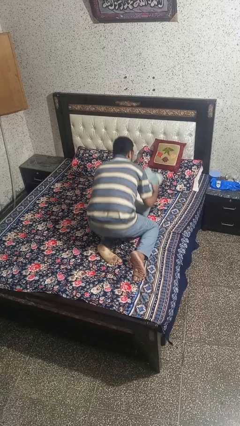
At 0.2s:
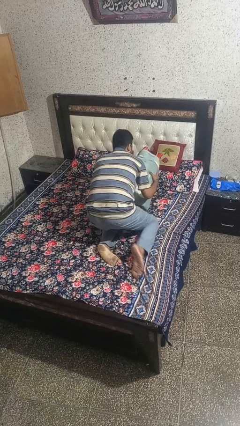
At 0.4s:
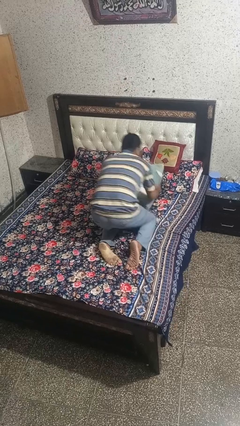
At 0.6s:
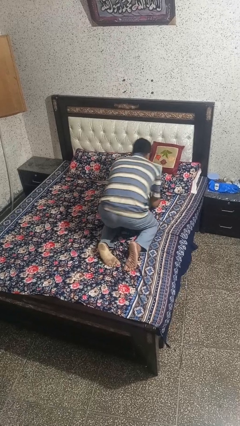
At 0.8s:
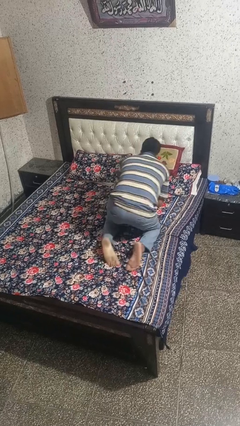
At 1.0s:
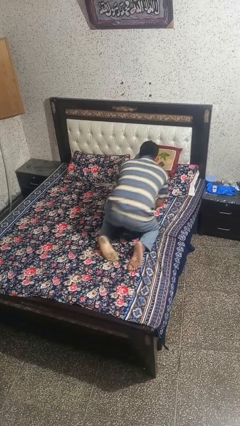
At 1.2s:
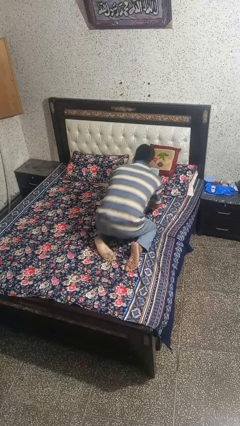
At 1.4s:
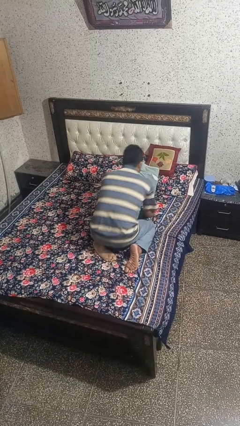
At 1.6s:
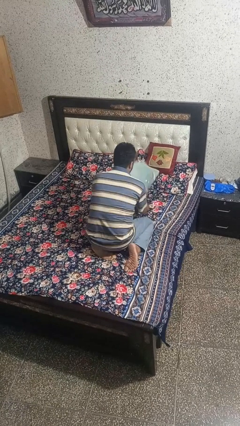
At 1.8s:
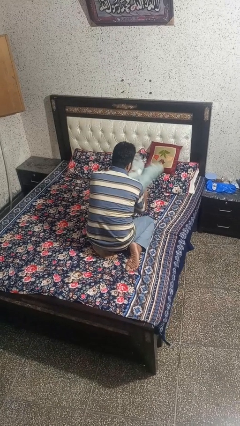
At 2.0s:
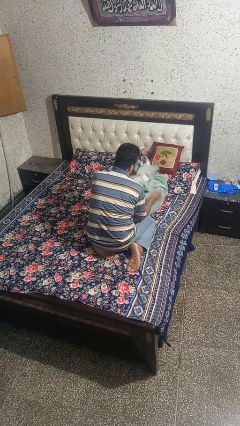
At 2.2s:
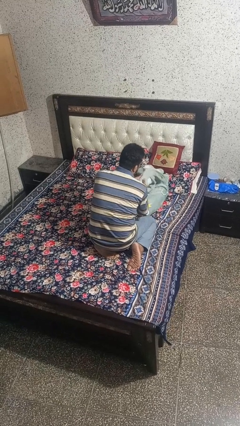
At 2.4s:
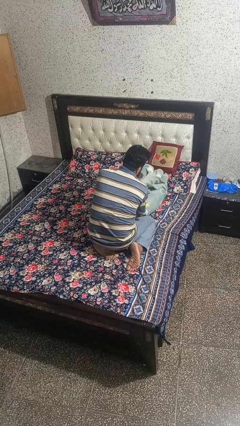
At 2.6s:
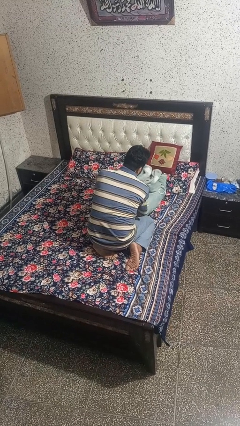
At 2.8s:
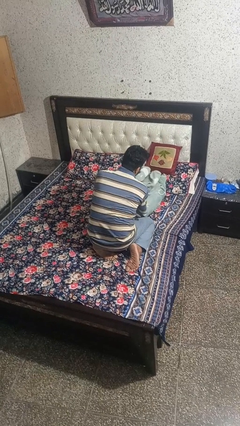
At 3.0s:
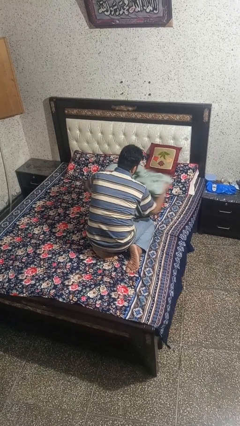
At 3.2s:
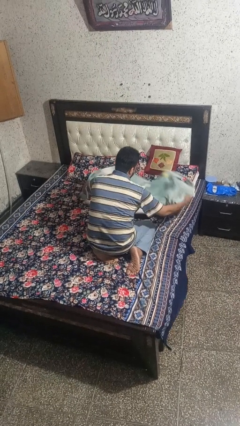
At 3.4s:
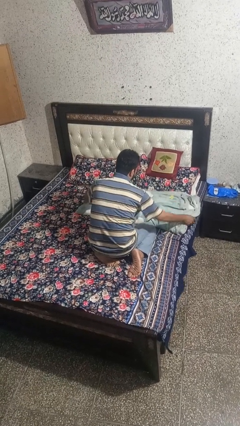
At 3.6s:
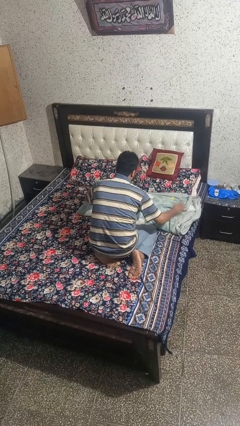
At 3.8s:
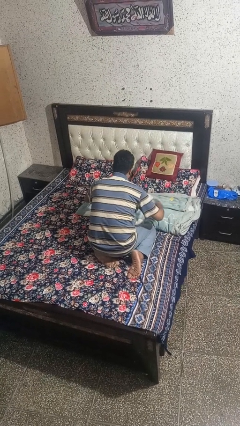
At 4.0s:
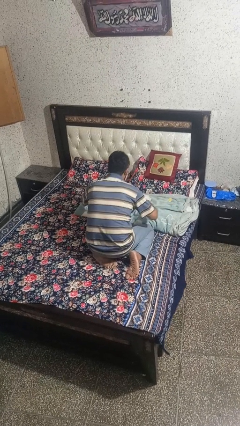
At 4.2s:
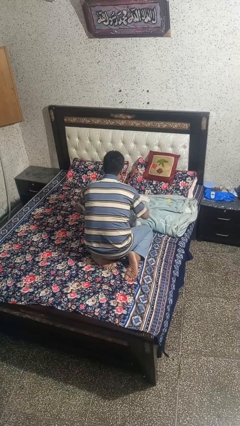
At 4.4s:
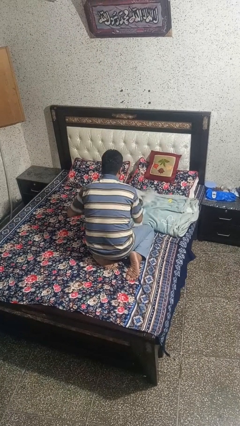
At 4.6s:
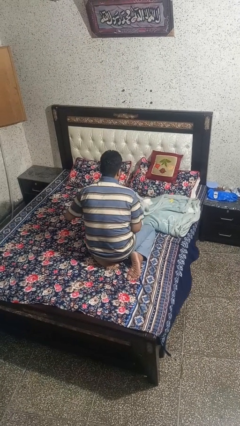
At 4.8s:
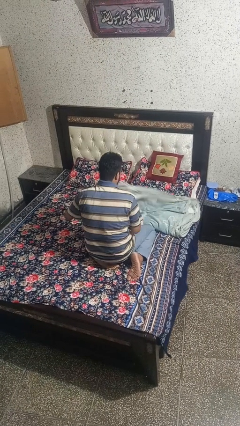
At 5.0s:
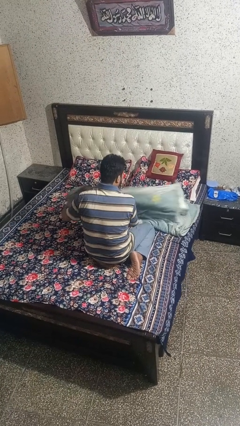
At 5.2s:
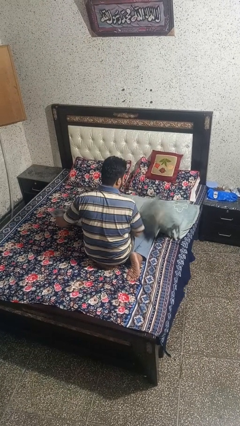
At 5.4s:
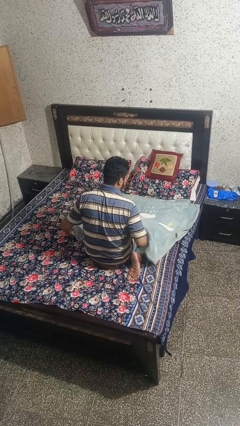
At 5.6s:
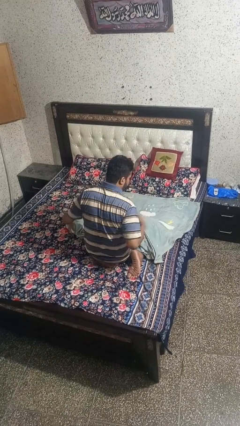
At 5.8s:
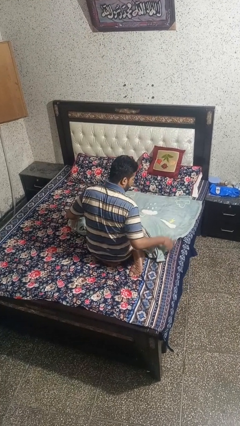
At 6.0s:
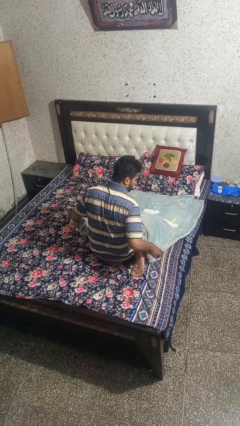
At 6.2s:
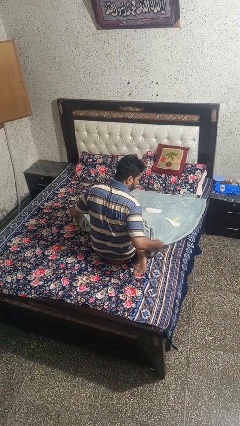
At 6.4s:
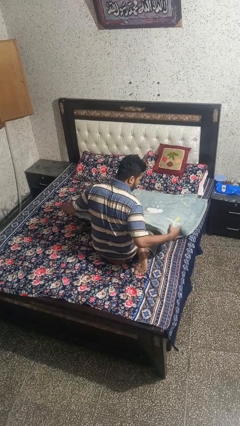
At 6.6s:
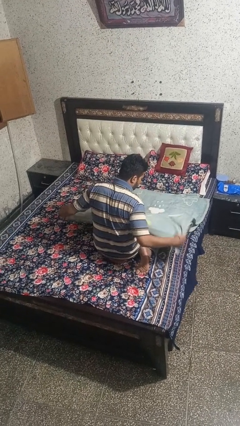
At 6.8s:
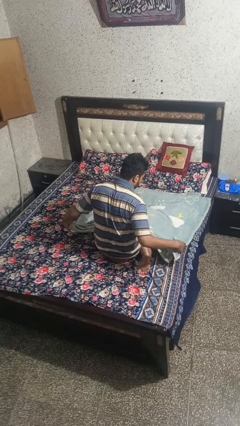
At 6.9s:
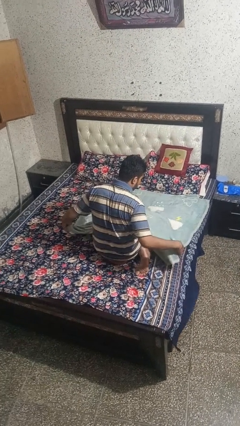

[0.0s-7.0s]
person unfolds blanket

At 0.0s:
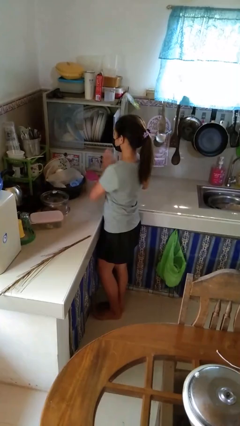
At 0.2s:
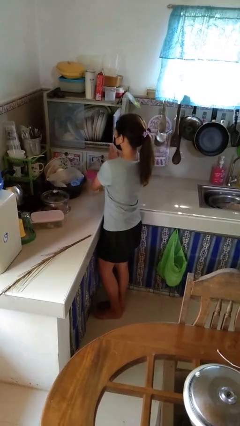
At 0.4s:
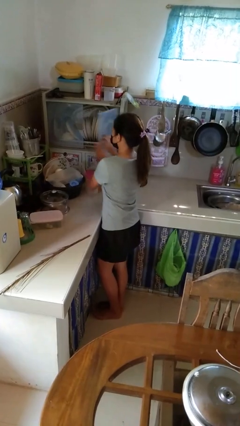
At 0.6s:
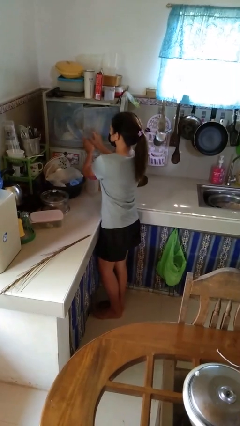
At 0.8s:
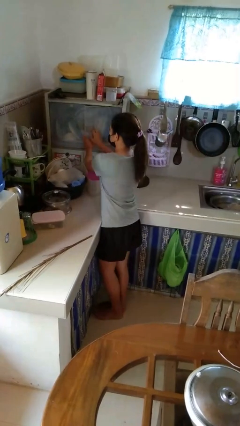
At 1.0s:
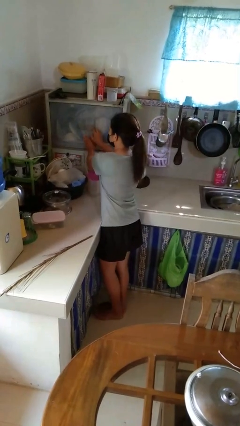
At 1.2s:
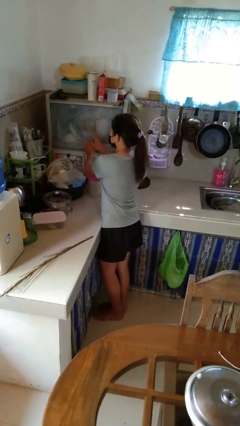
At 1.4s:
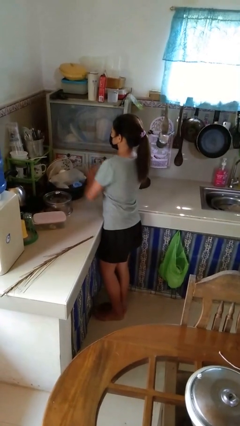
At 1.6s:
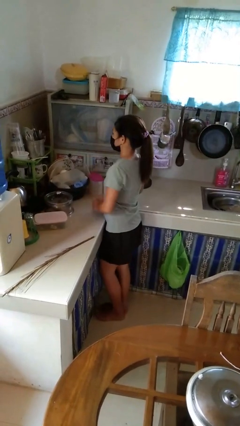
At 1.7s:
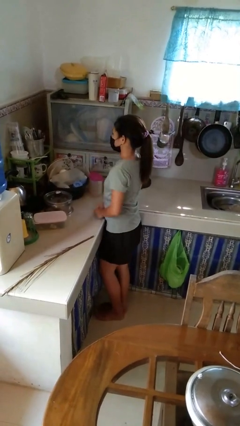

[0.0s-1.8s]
person closes kitchen drawer

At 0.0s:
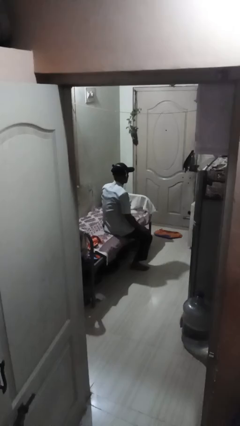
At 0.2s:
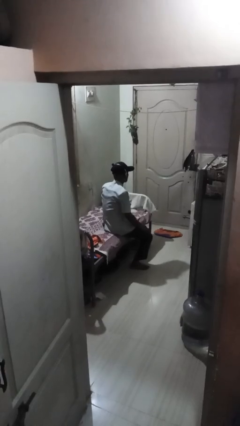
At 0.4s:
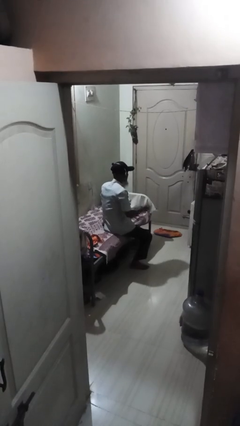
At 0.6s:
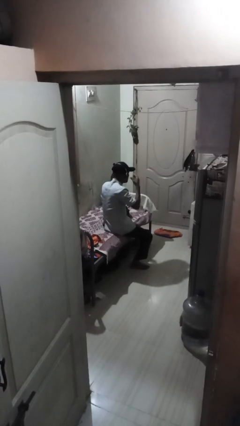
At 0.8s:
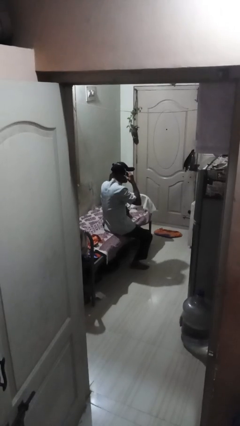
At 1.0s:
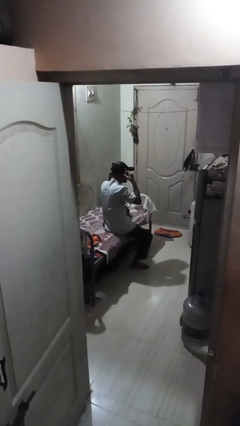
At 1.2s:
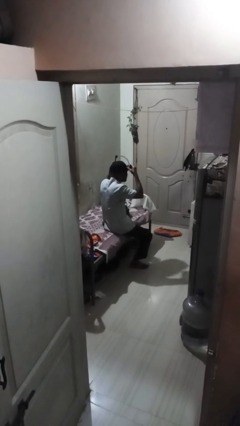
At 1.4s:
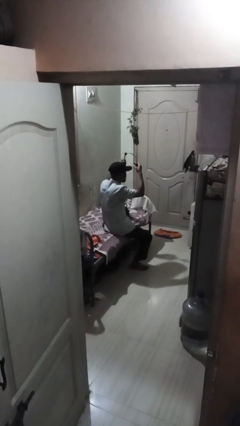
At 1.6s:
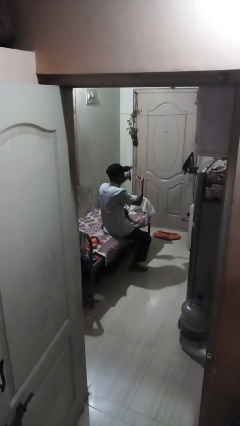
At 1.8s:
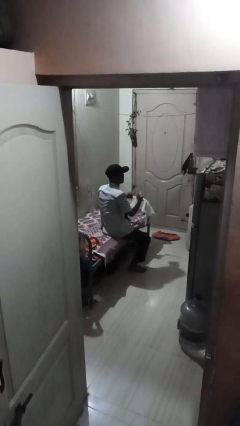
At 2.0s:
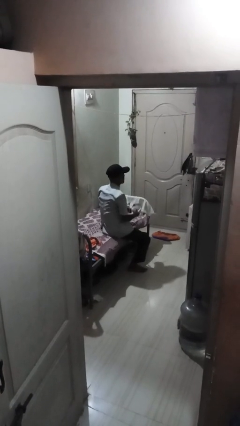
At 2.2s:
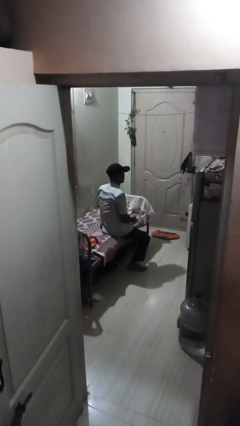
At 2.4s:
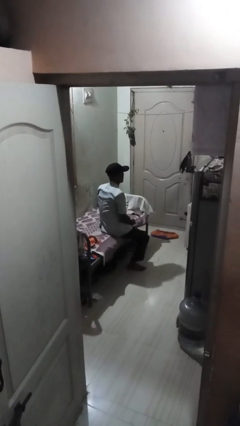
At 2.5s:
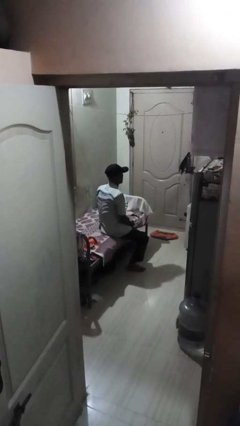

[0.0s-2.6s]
person takes off headphones

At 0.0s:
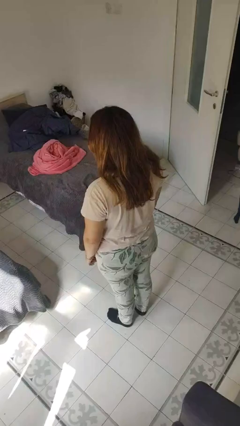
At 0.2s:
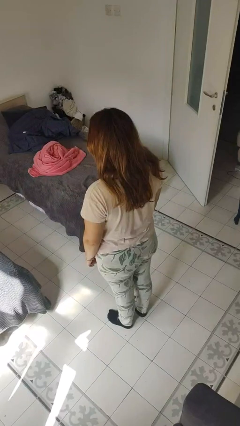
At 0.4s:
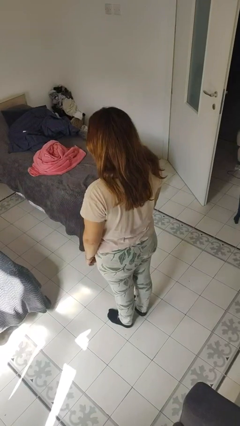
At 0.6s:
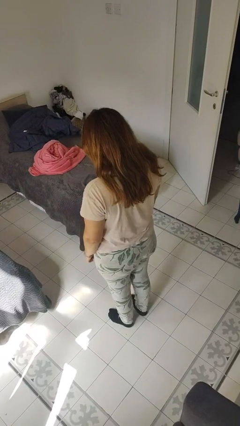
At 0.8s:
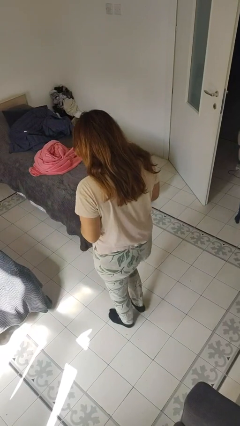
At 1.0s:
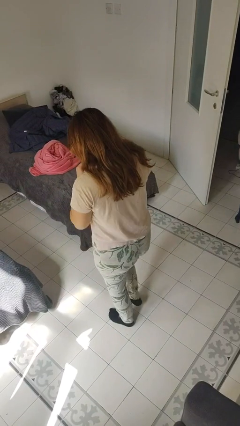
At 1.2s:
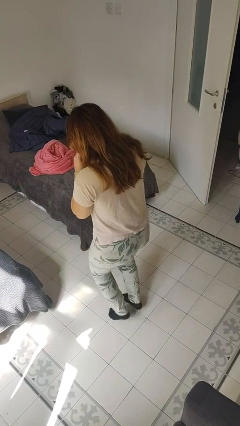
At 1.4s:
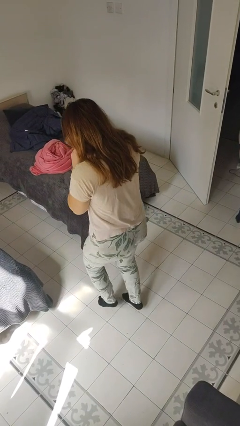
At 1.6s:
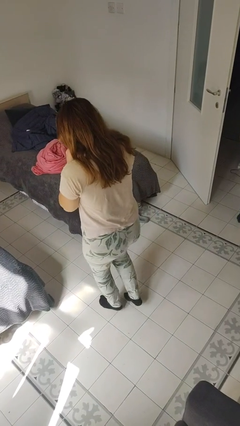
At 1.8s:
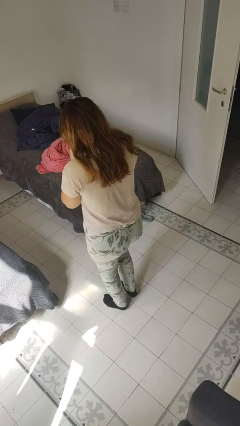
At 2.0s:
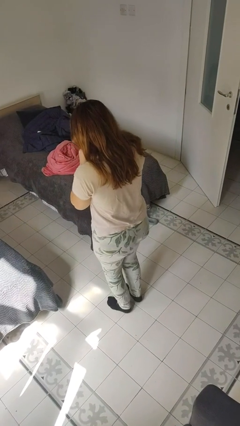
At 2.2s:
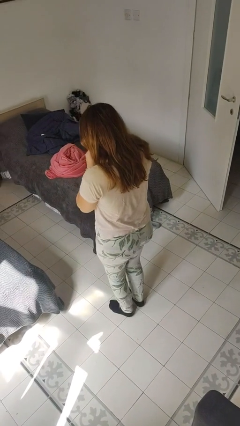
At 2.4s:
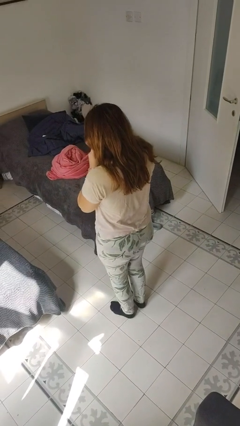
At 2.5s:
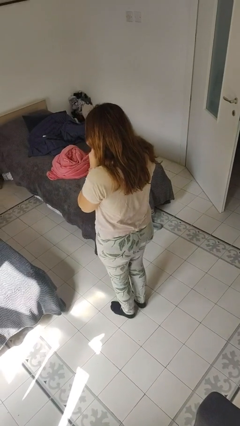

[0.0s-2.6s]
person walks tiptoe

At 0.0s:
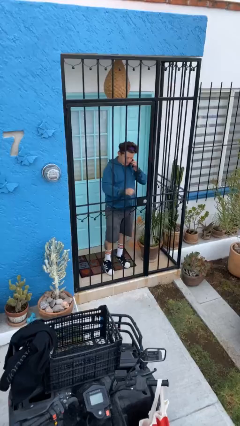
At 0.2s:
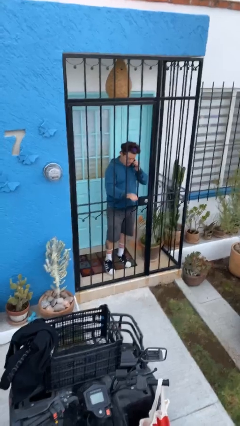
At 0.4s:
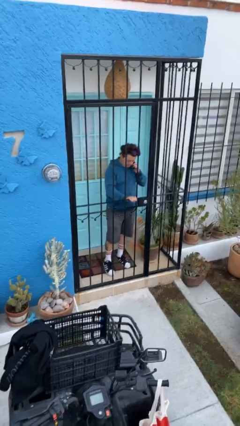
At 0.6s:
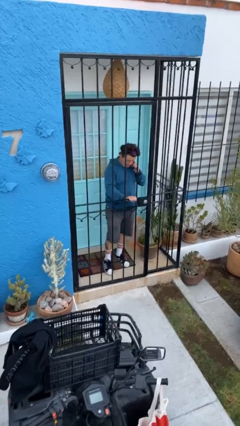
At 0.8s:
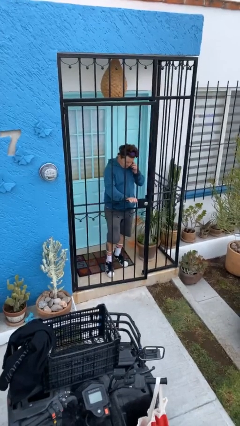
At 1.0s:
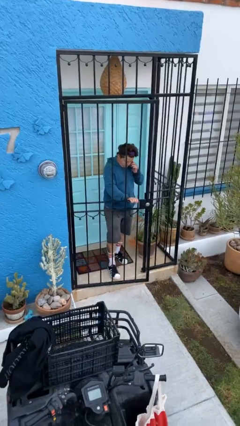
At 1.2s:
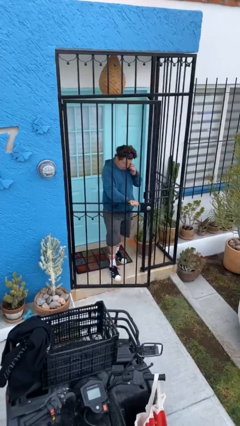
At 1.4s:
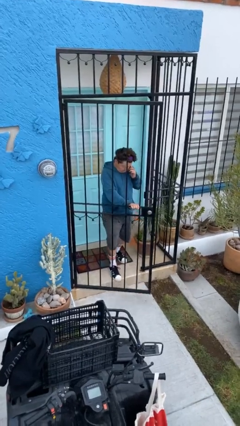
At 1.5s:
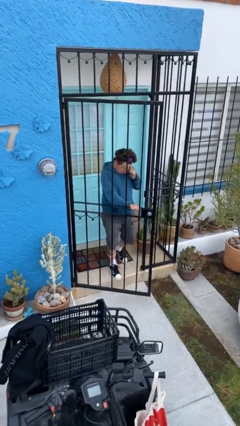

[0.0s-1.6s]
person opens facility door

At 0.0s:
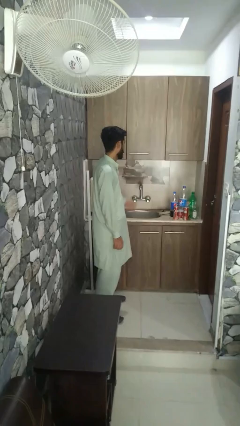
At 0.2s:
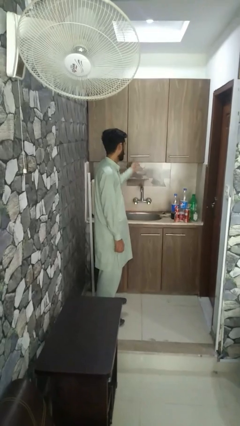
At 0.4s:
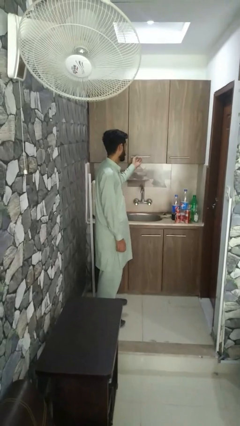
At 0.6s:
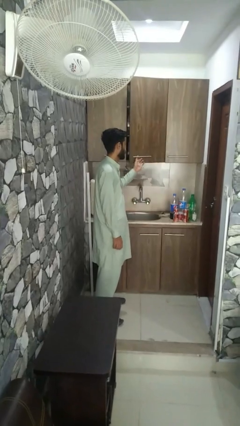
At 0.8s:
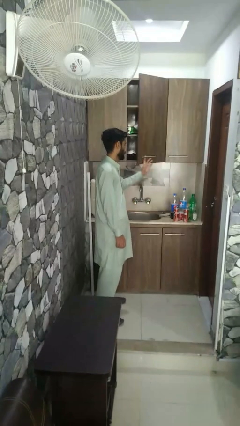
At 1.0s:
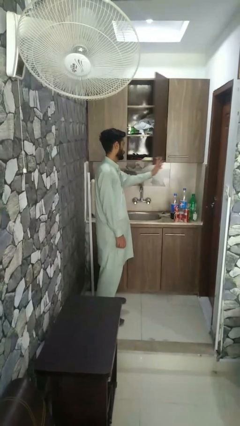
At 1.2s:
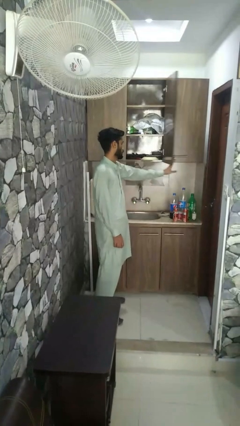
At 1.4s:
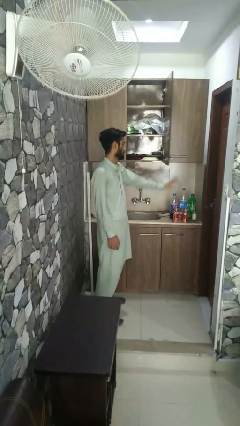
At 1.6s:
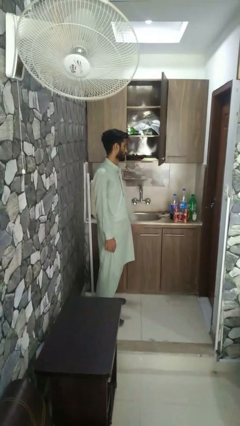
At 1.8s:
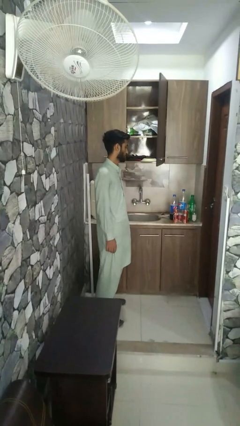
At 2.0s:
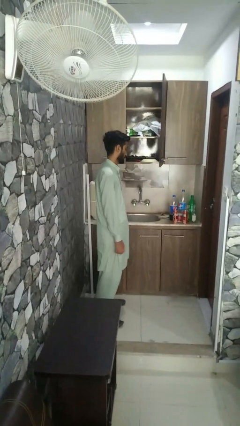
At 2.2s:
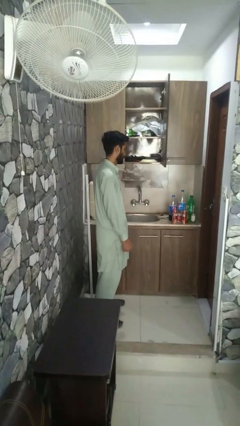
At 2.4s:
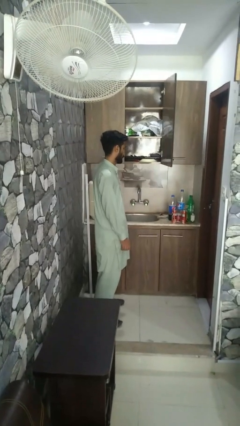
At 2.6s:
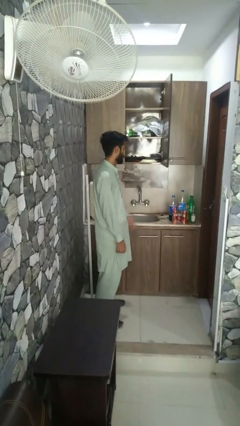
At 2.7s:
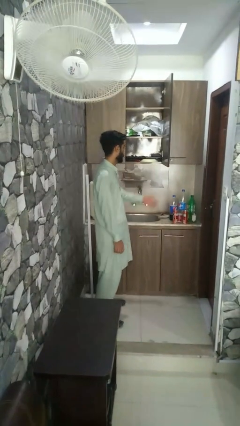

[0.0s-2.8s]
person opens closet door
